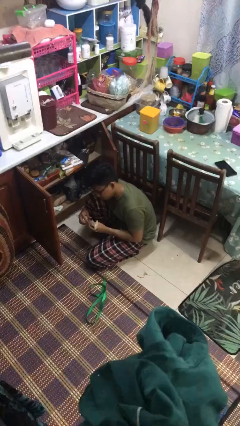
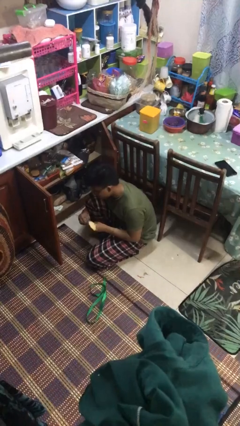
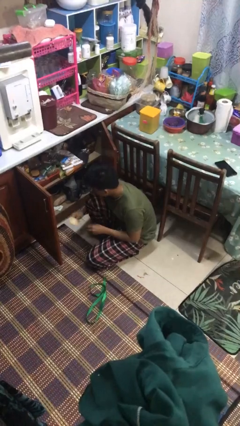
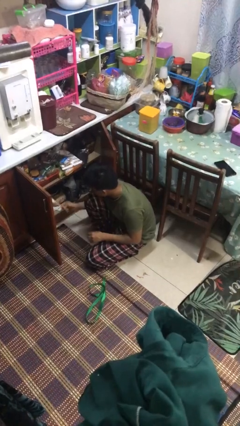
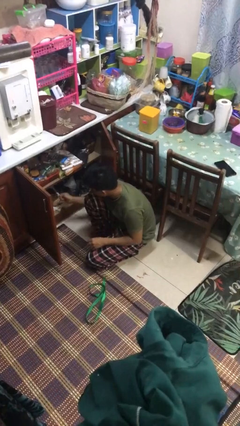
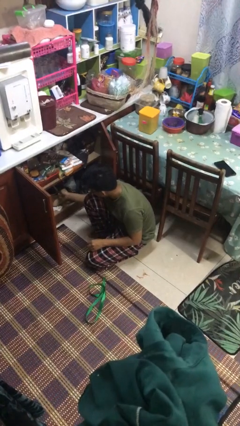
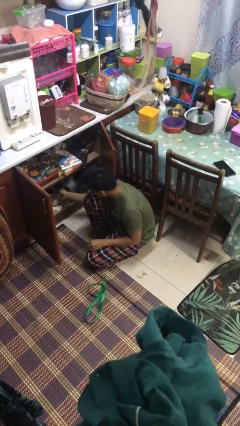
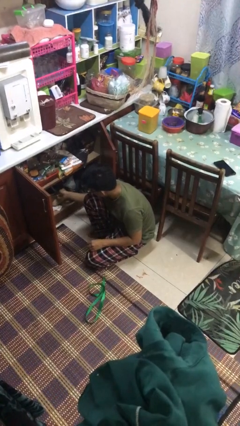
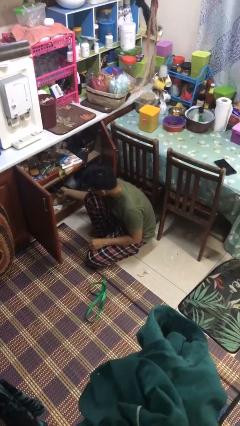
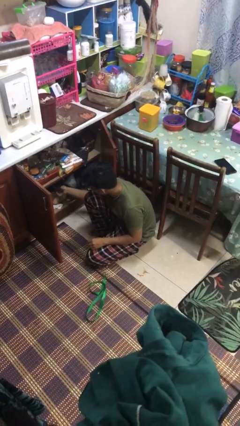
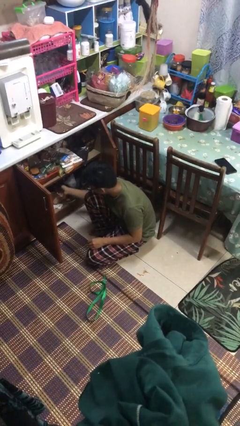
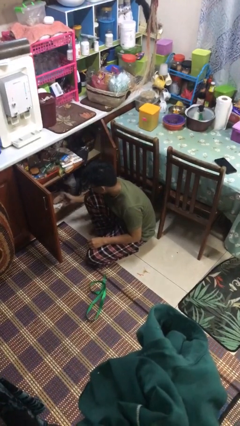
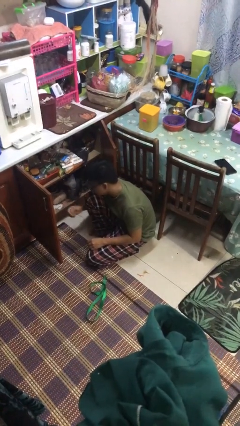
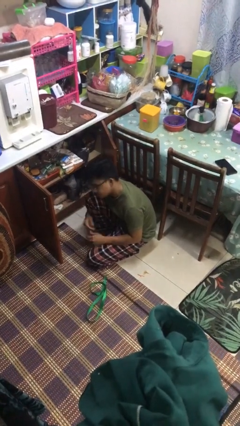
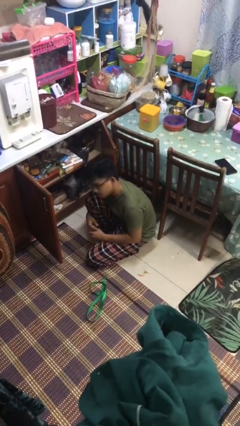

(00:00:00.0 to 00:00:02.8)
person puts object into kitchen drawer

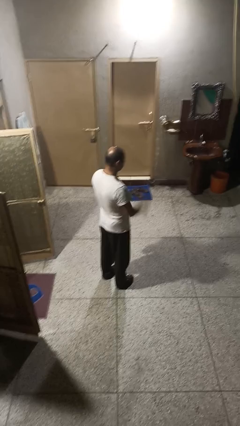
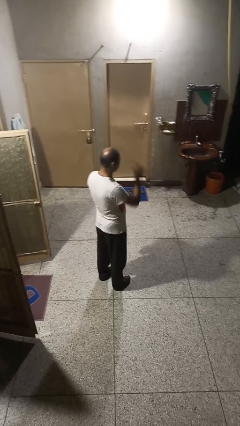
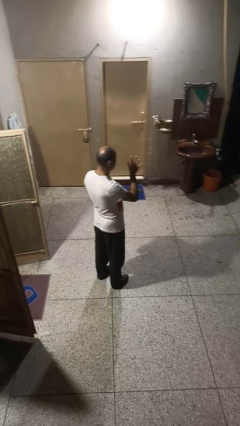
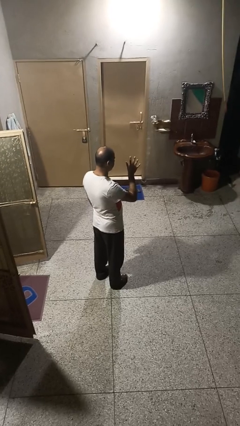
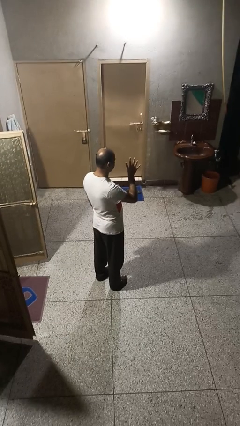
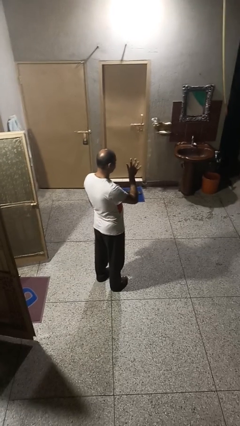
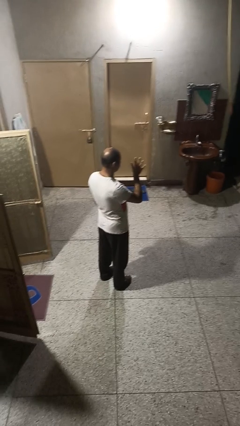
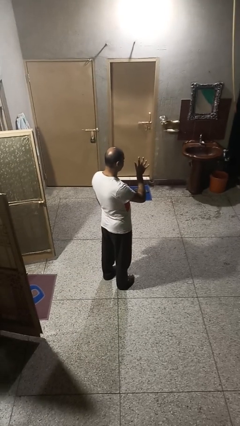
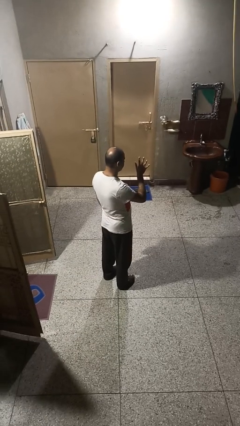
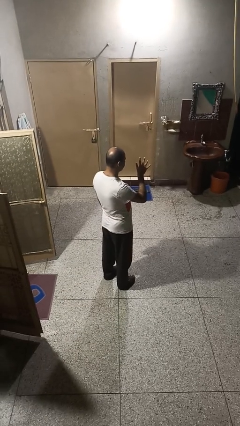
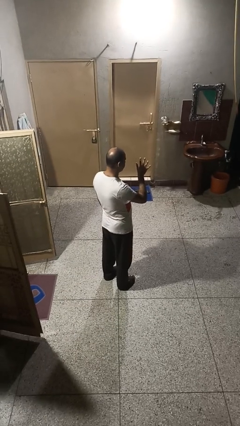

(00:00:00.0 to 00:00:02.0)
person gestures number five

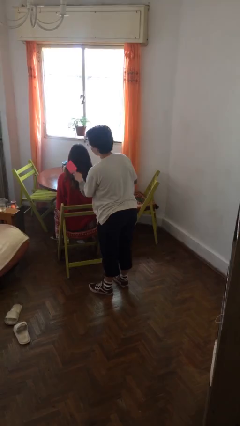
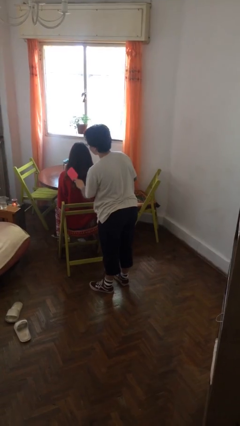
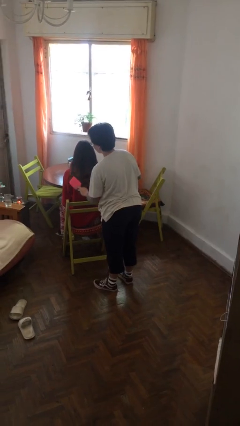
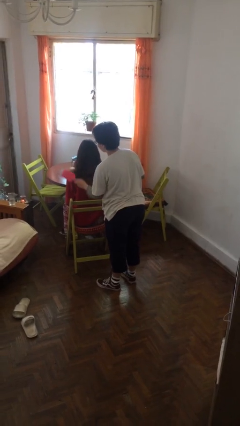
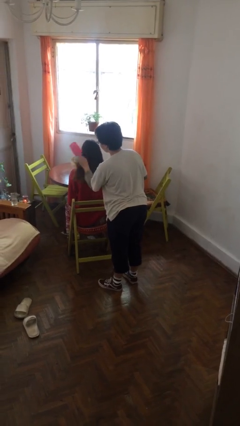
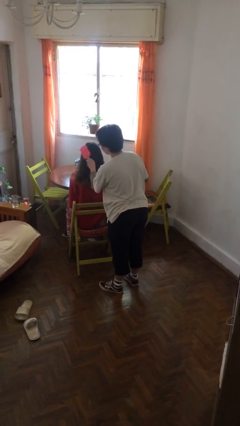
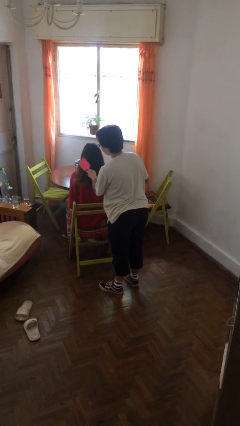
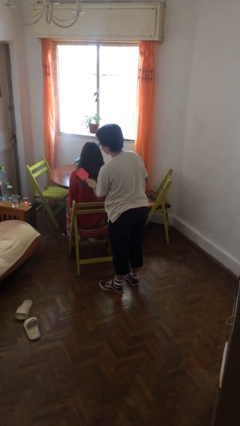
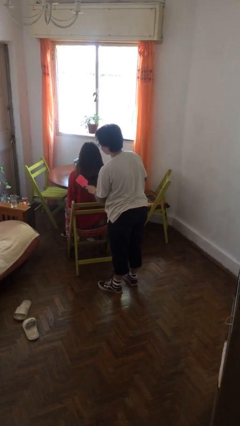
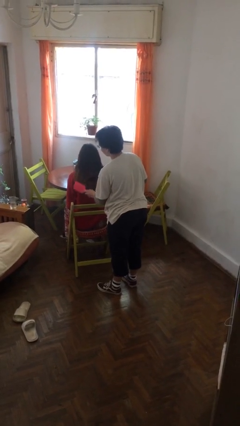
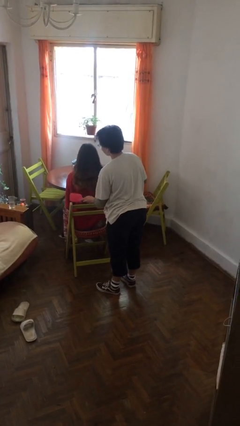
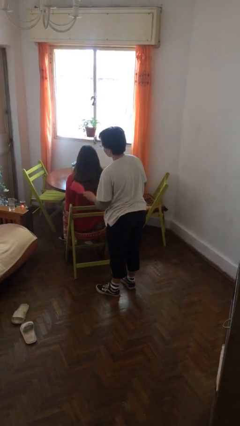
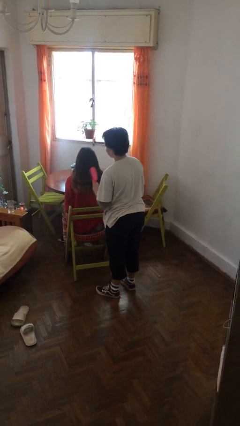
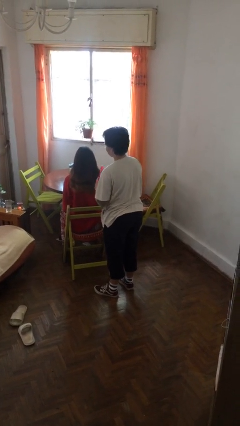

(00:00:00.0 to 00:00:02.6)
person brushes hair of person

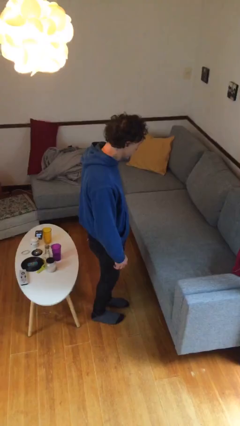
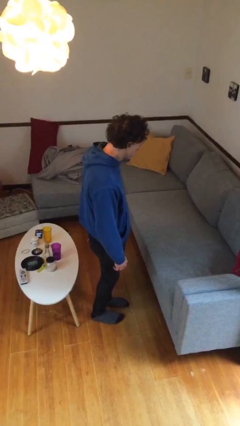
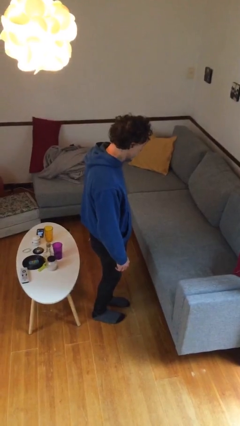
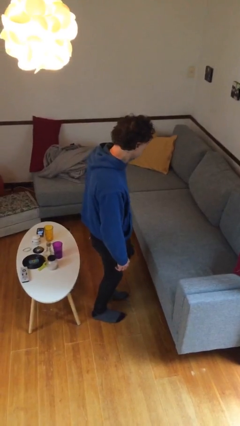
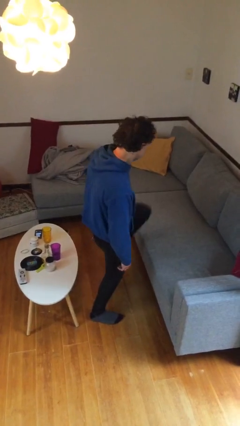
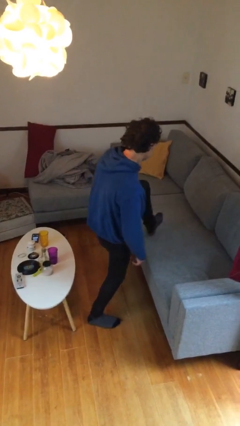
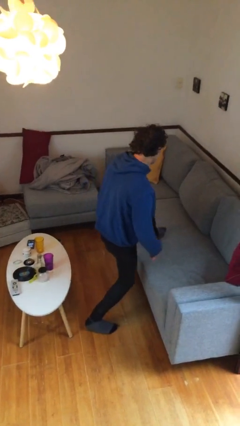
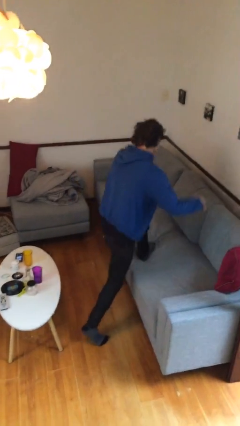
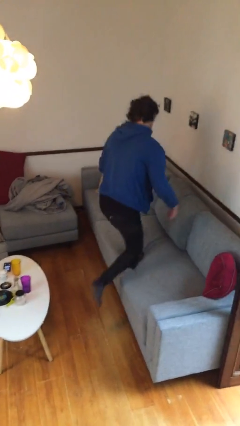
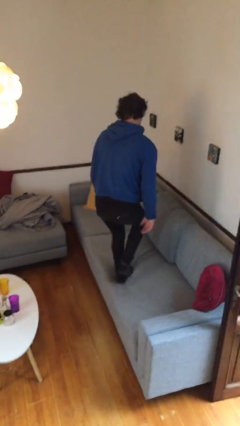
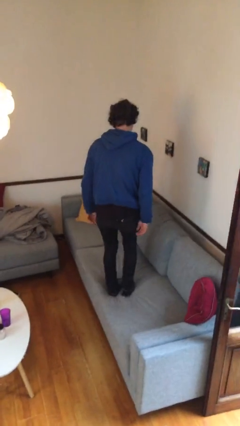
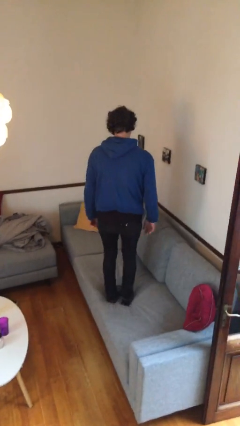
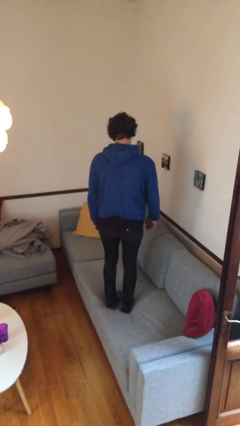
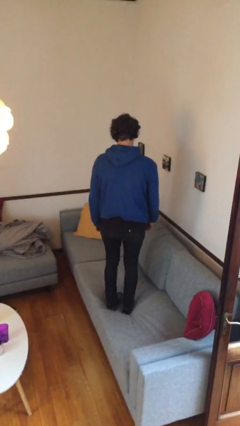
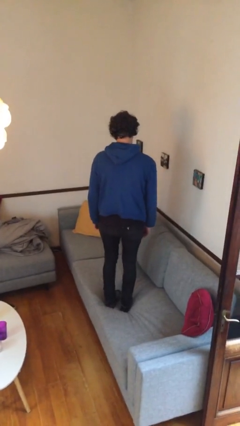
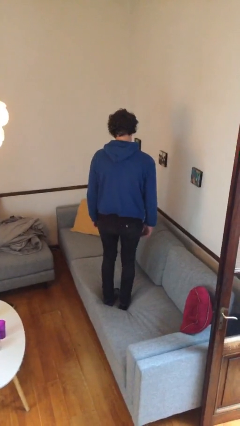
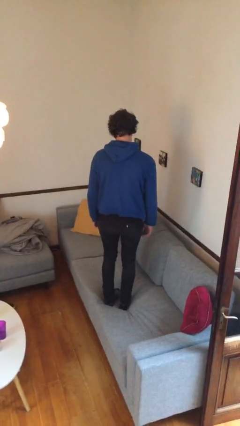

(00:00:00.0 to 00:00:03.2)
person climbs on couch

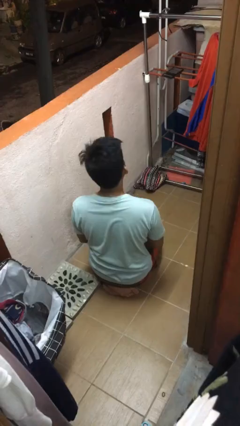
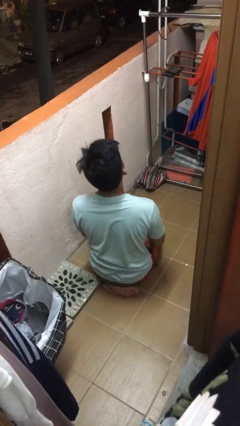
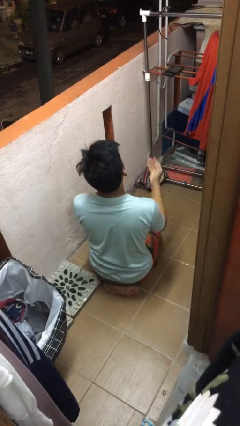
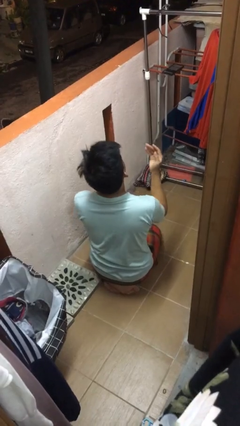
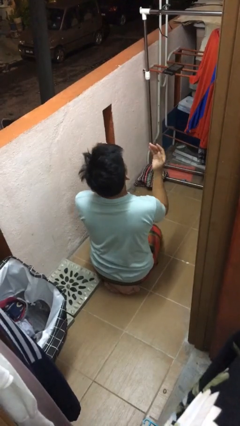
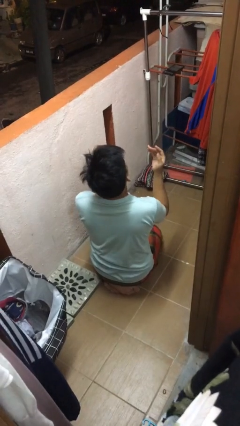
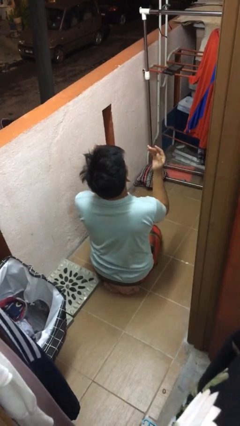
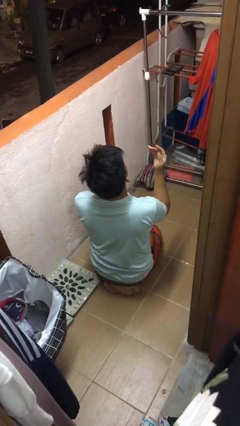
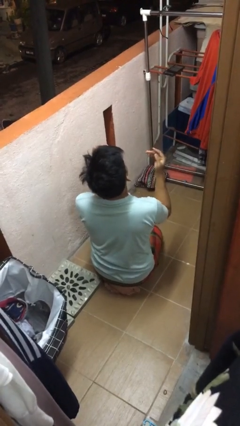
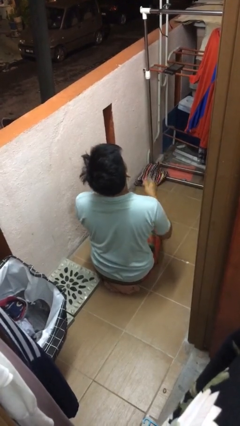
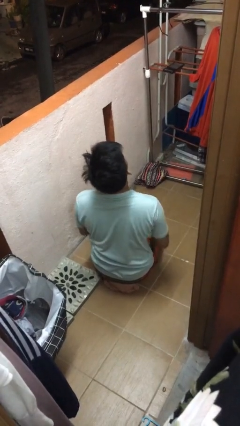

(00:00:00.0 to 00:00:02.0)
person prays

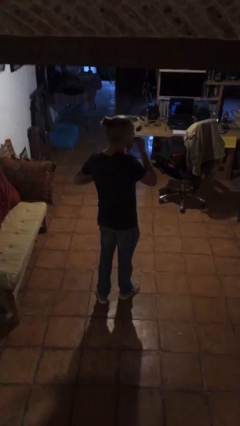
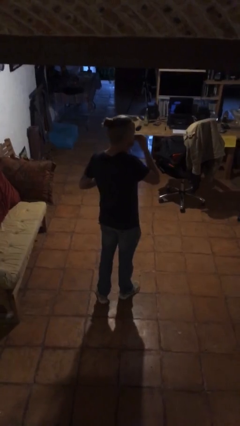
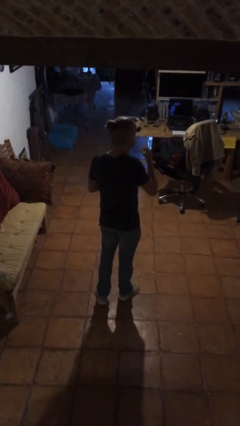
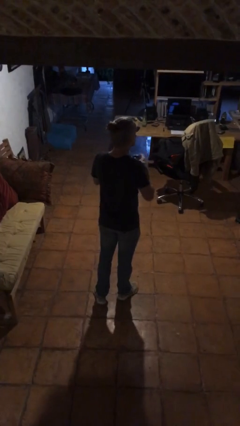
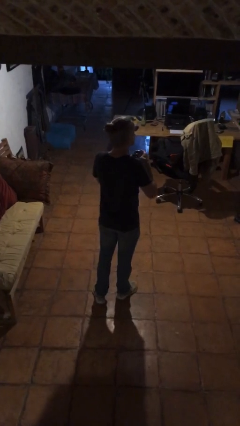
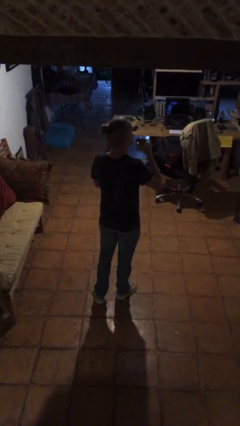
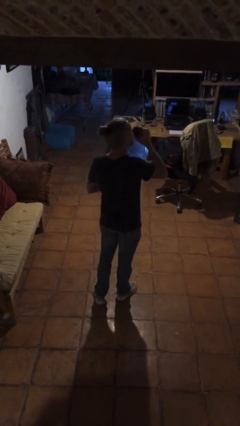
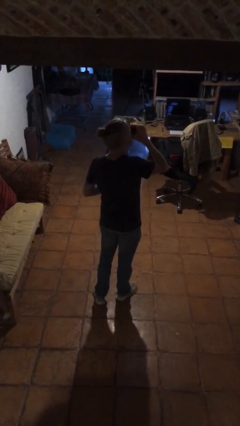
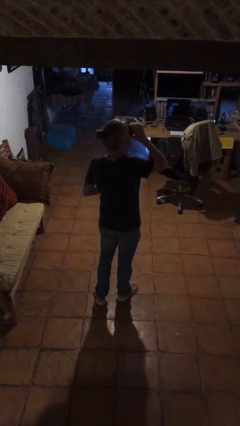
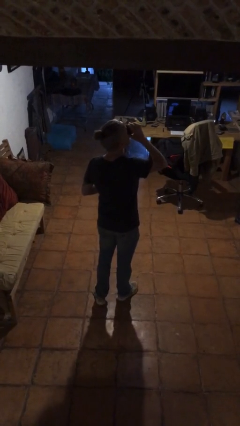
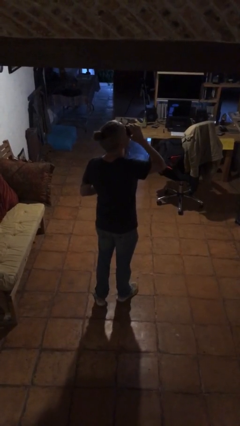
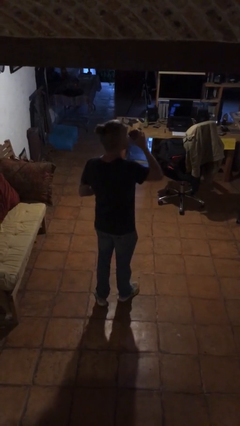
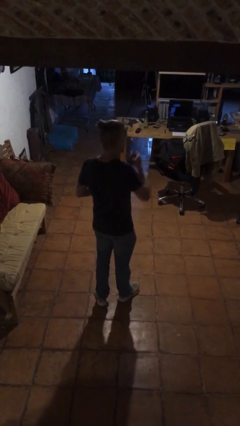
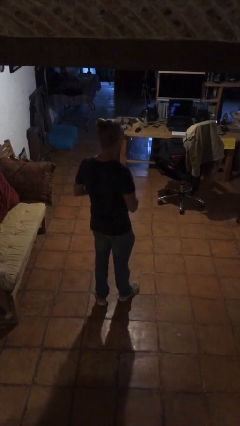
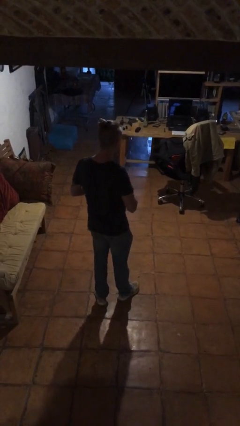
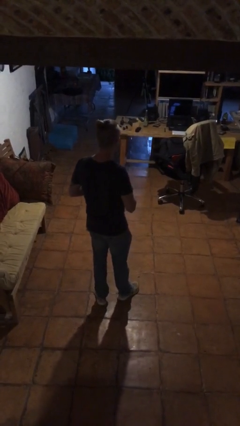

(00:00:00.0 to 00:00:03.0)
person drinks from cup

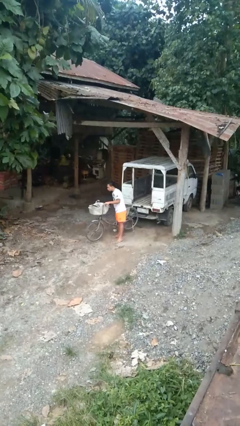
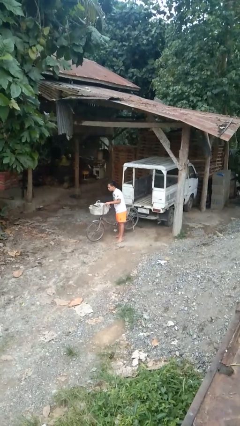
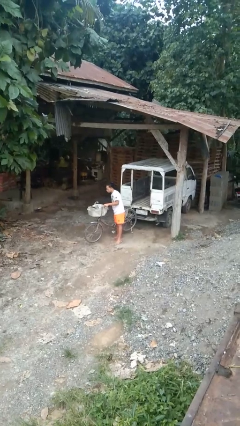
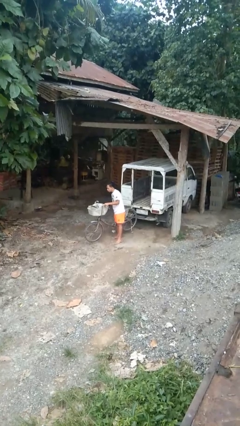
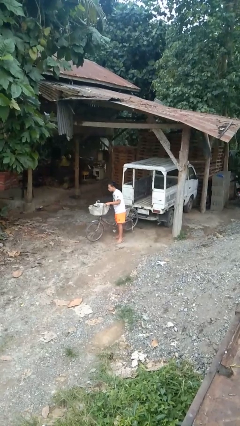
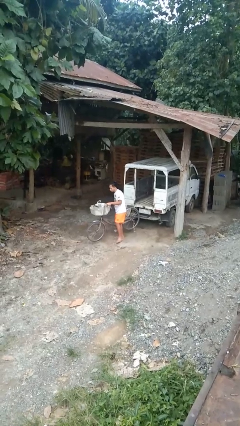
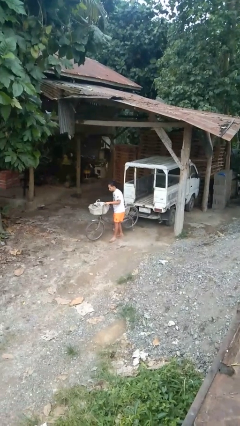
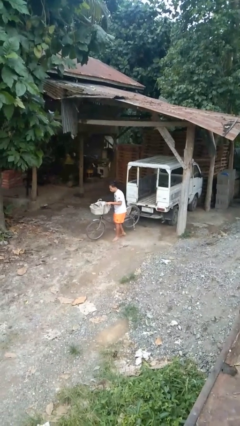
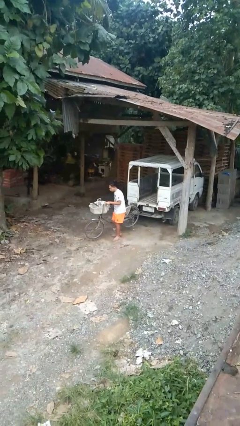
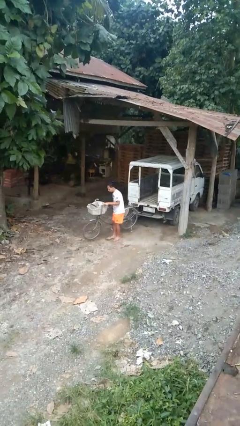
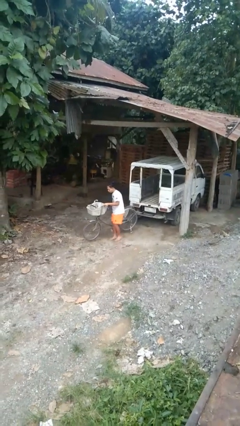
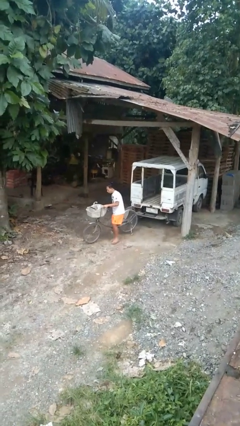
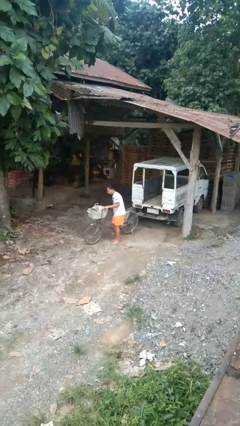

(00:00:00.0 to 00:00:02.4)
person carries bicycle
